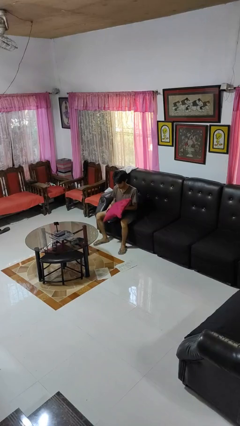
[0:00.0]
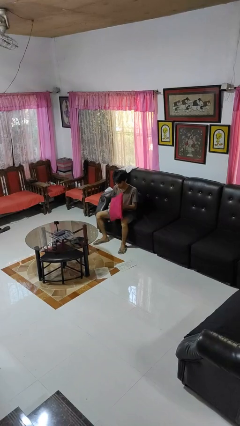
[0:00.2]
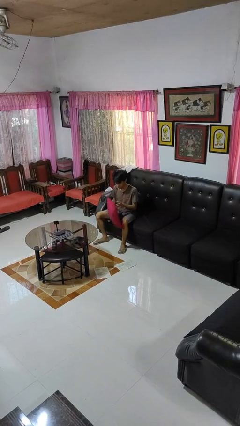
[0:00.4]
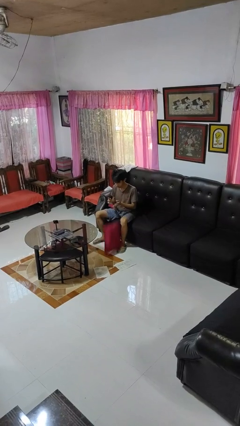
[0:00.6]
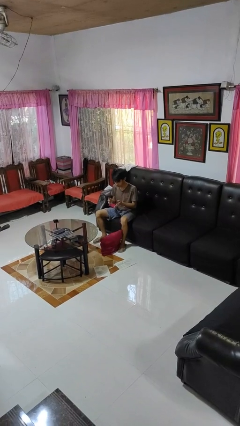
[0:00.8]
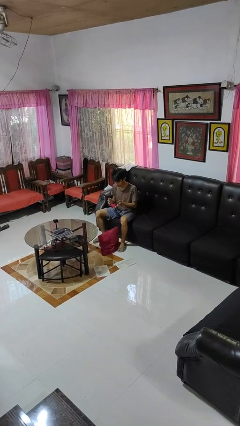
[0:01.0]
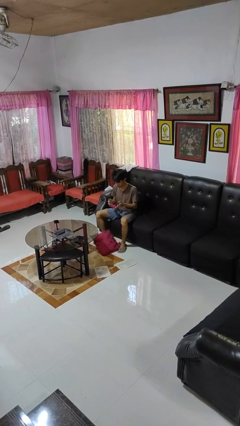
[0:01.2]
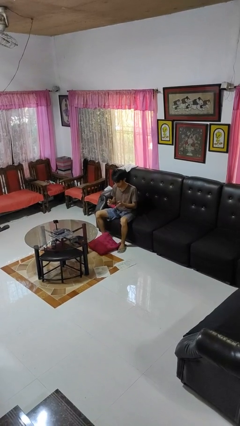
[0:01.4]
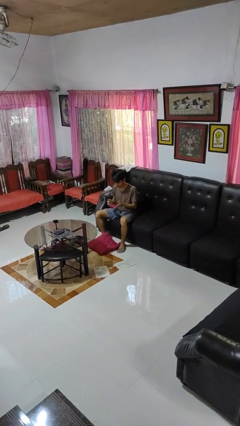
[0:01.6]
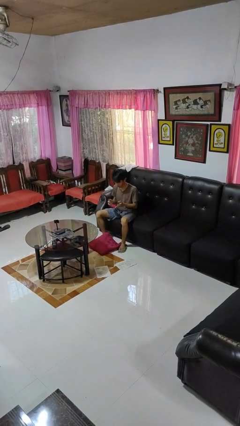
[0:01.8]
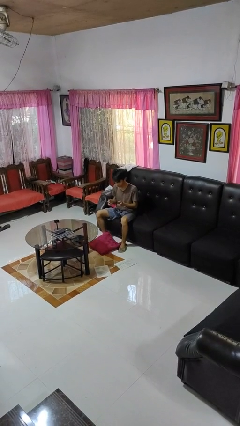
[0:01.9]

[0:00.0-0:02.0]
person drops object

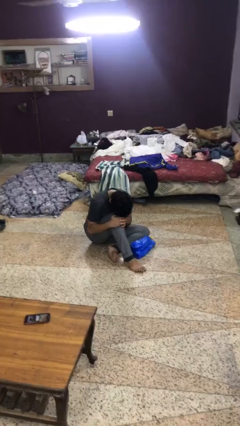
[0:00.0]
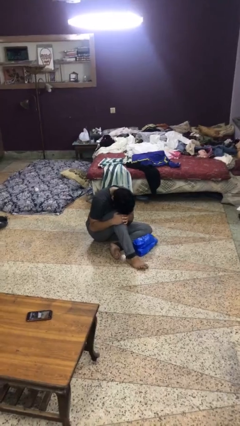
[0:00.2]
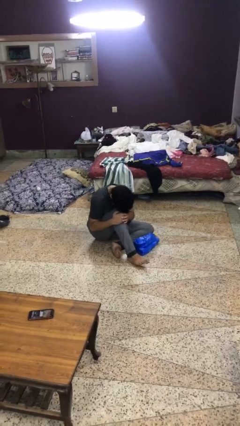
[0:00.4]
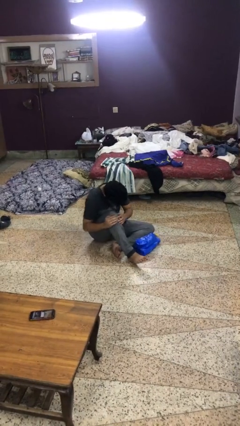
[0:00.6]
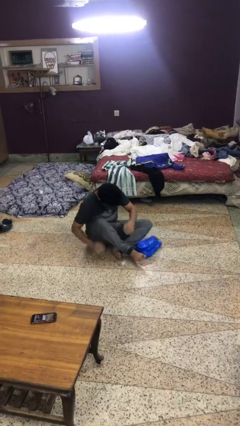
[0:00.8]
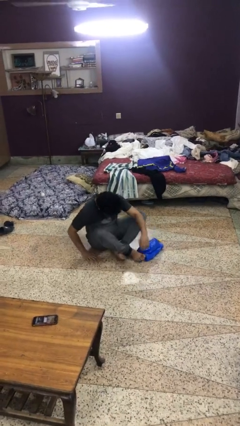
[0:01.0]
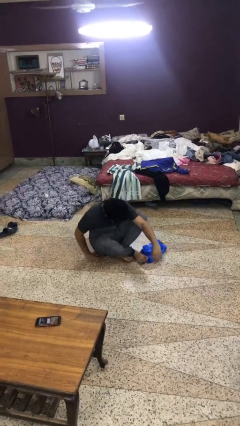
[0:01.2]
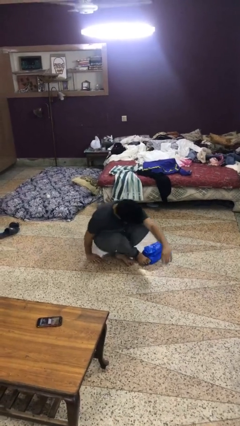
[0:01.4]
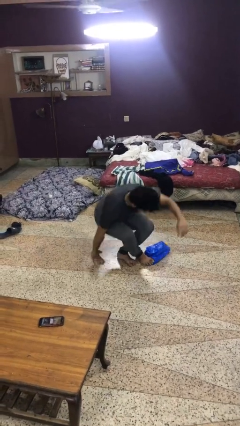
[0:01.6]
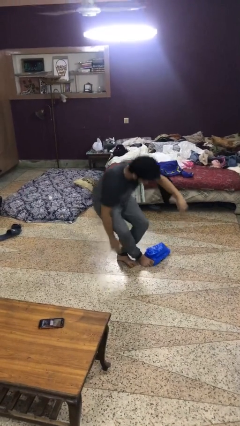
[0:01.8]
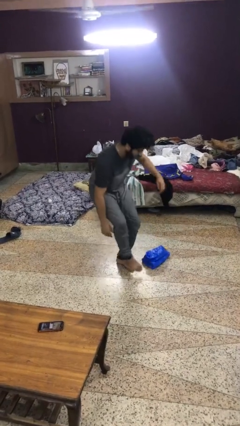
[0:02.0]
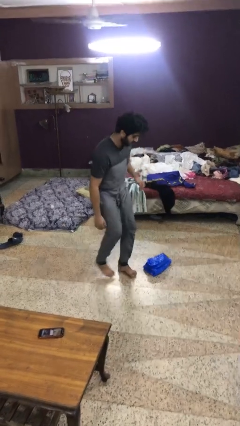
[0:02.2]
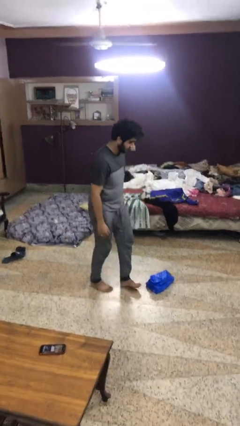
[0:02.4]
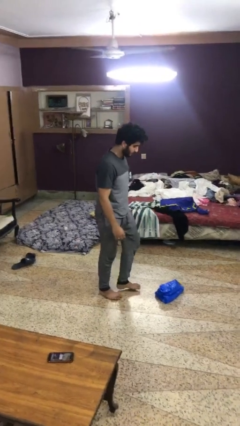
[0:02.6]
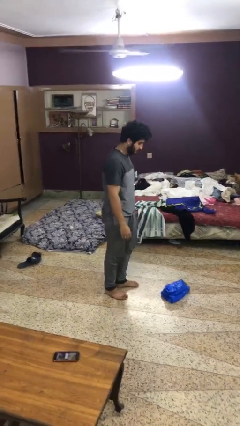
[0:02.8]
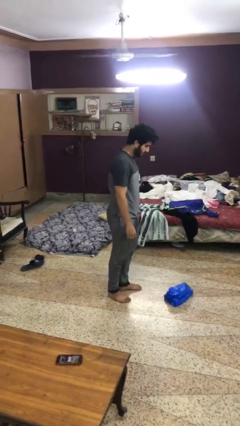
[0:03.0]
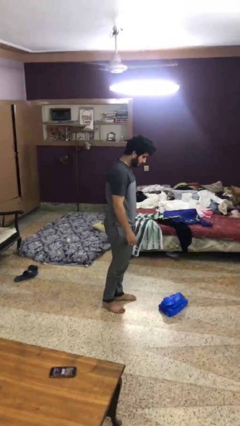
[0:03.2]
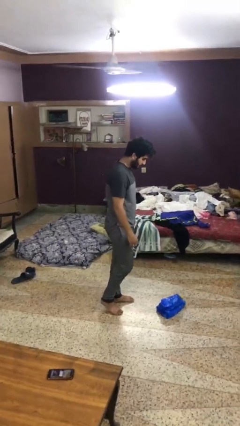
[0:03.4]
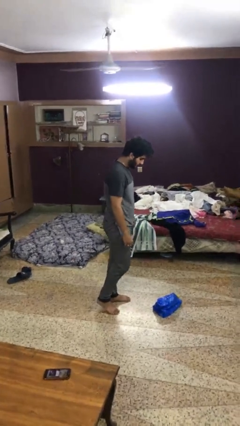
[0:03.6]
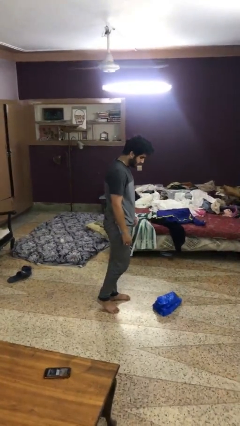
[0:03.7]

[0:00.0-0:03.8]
person stands up from floor

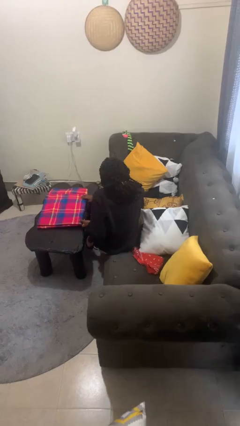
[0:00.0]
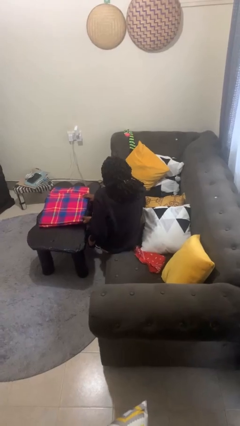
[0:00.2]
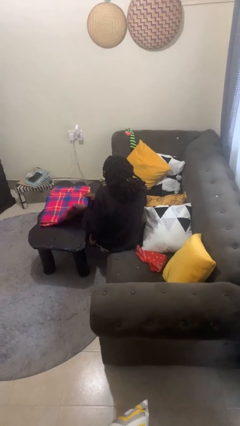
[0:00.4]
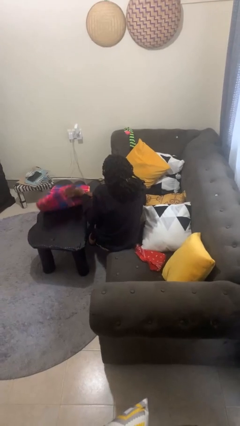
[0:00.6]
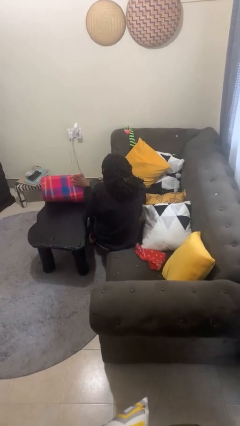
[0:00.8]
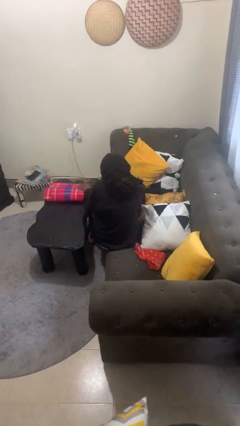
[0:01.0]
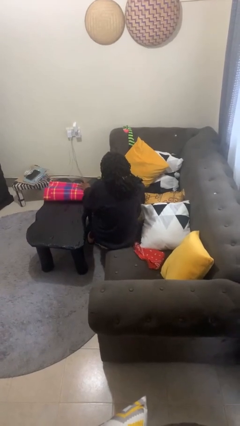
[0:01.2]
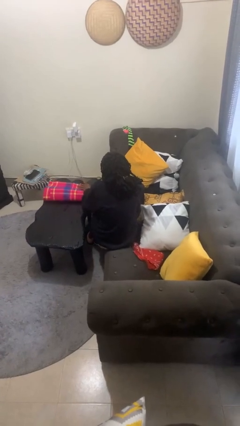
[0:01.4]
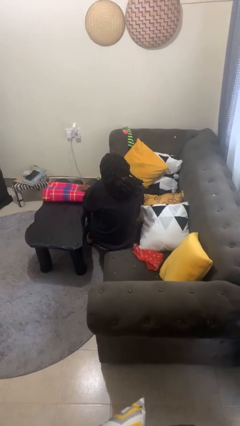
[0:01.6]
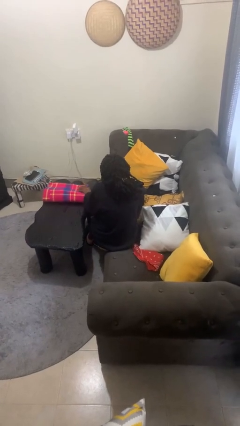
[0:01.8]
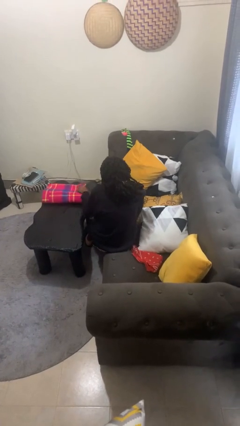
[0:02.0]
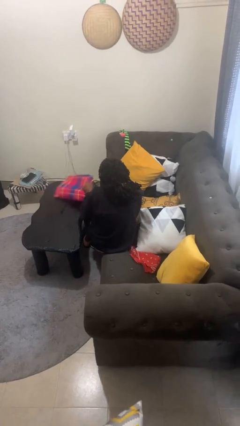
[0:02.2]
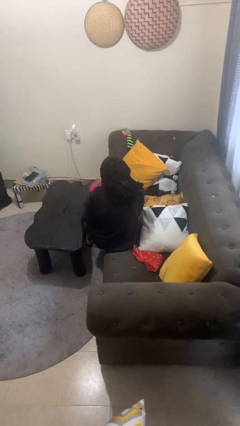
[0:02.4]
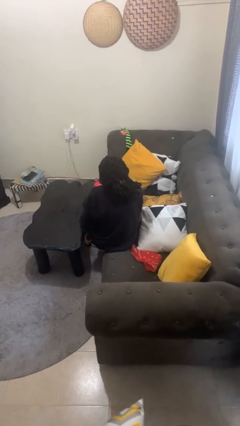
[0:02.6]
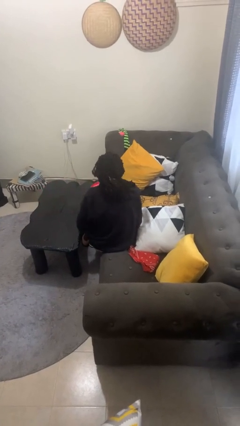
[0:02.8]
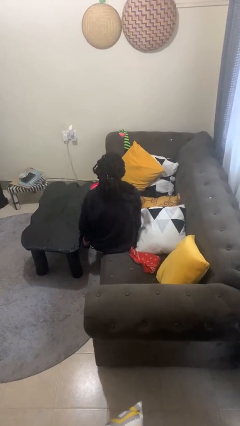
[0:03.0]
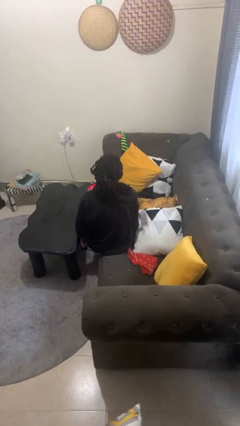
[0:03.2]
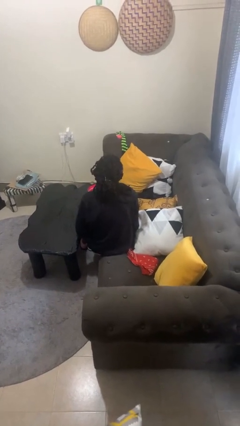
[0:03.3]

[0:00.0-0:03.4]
person folds tablecloth

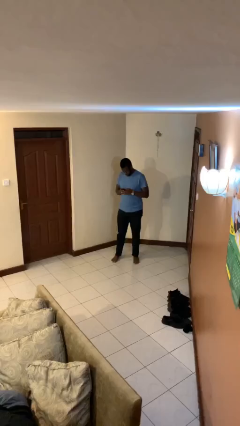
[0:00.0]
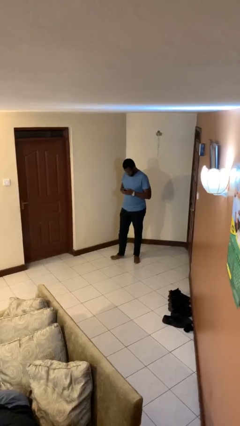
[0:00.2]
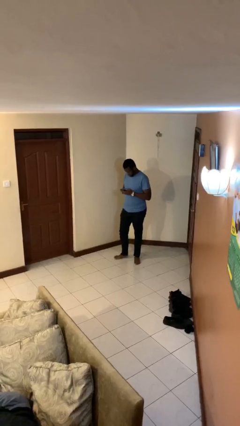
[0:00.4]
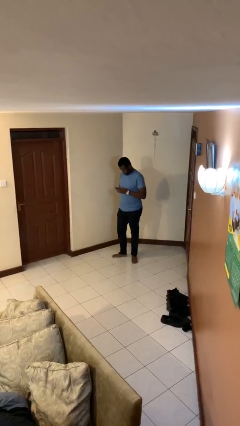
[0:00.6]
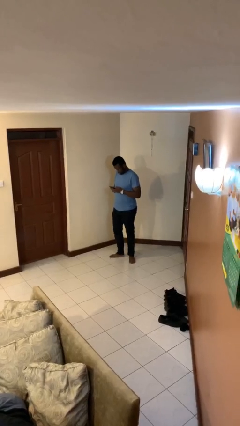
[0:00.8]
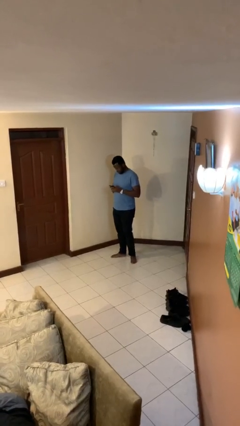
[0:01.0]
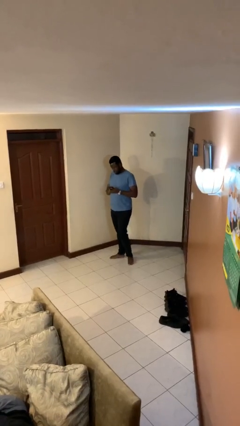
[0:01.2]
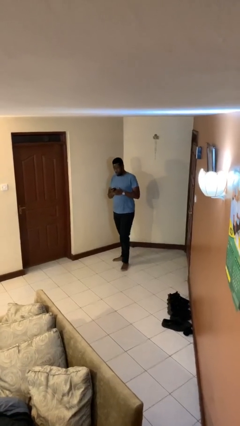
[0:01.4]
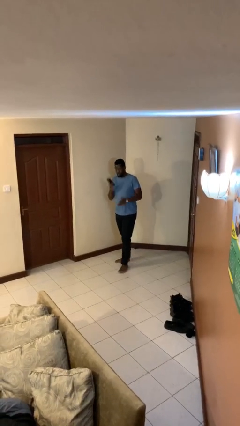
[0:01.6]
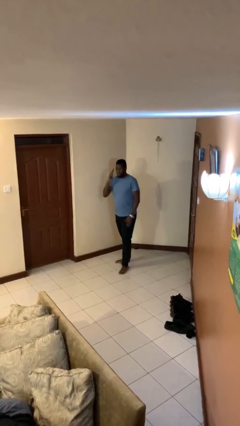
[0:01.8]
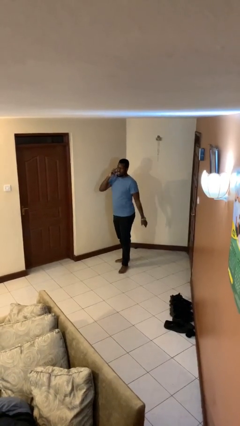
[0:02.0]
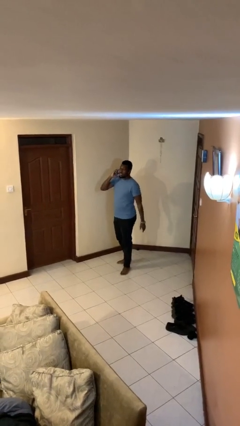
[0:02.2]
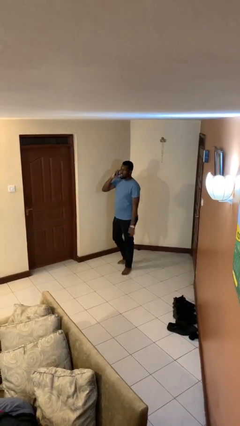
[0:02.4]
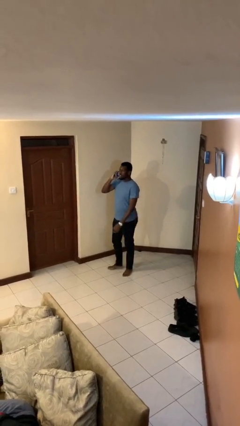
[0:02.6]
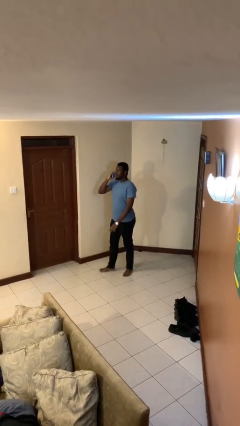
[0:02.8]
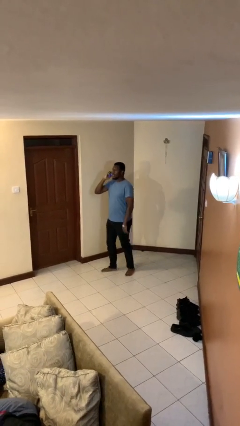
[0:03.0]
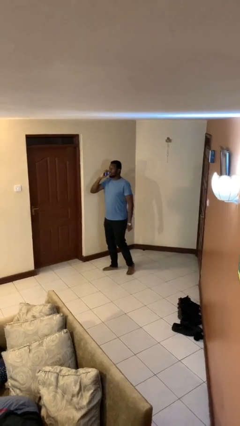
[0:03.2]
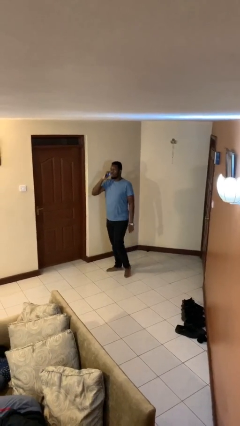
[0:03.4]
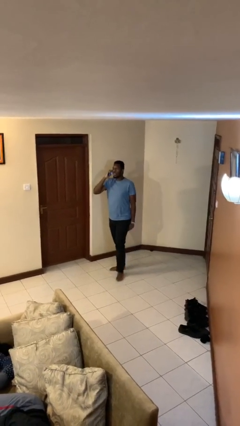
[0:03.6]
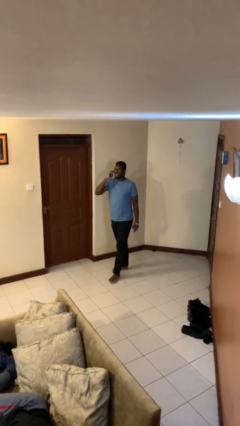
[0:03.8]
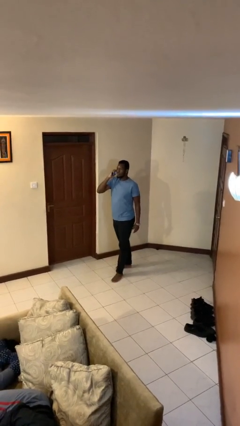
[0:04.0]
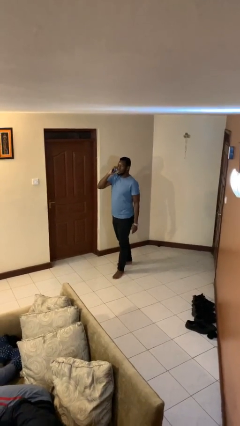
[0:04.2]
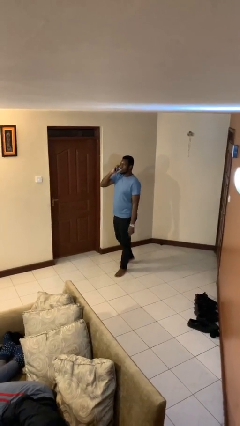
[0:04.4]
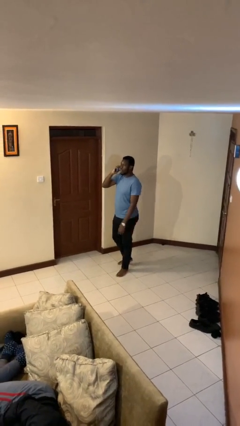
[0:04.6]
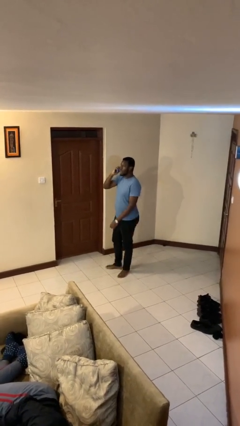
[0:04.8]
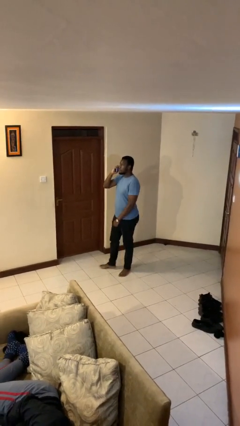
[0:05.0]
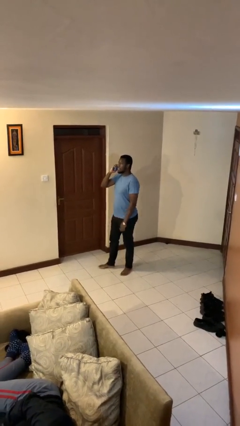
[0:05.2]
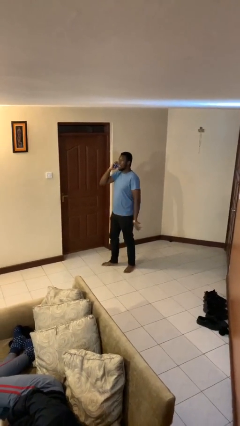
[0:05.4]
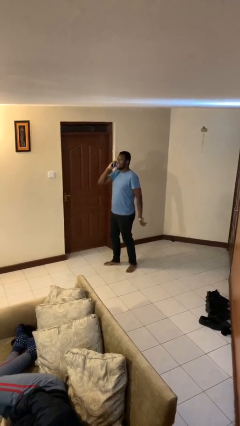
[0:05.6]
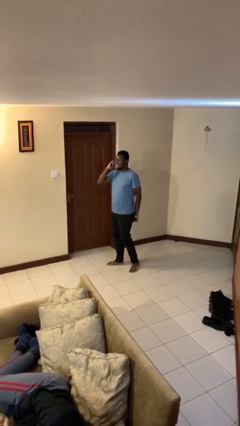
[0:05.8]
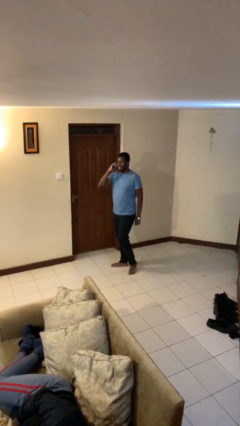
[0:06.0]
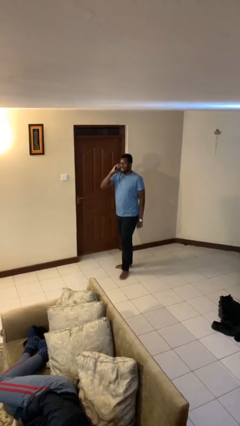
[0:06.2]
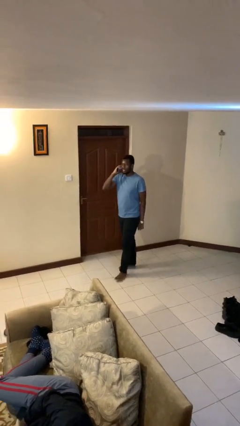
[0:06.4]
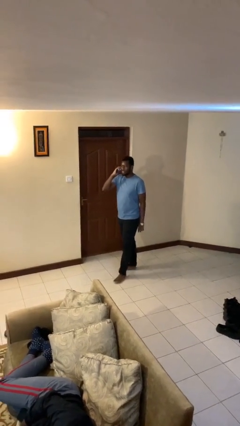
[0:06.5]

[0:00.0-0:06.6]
person talks on phone

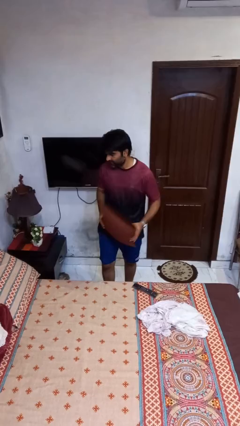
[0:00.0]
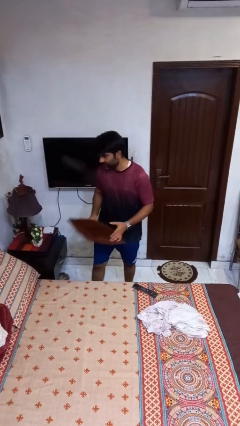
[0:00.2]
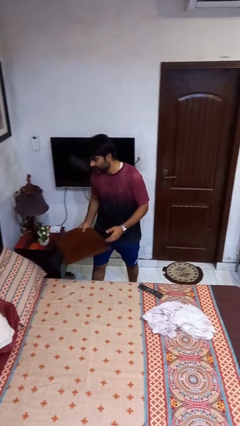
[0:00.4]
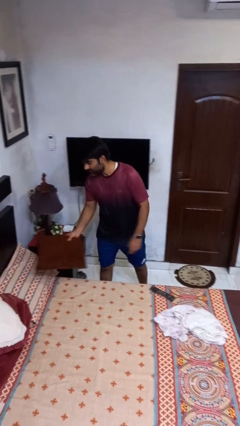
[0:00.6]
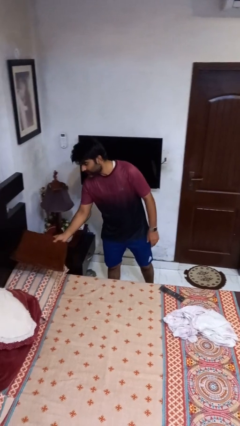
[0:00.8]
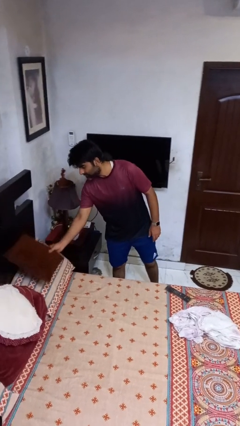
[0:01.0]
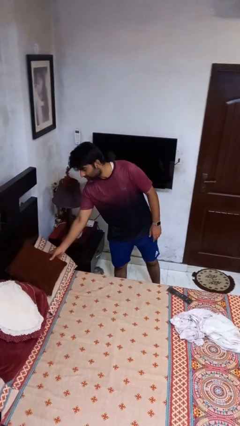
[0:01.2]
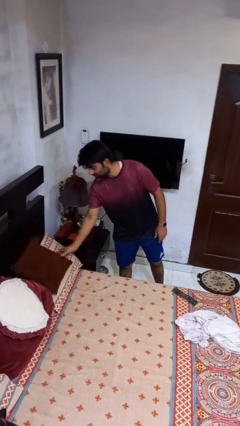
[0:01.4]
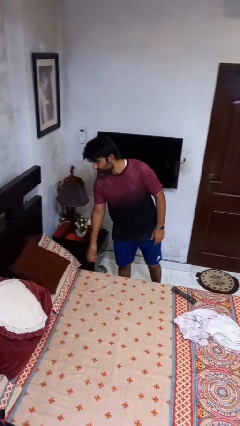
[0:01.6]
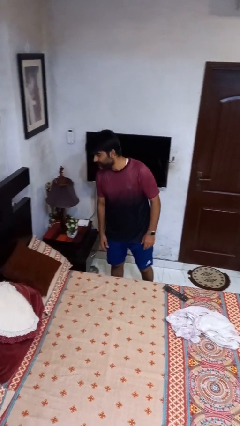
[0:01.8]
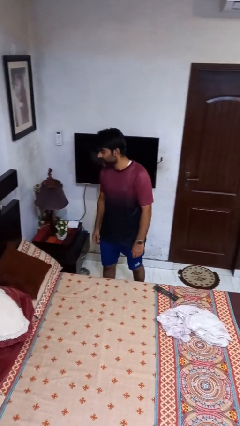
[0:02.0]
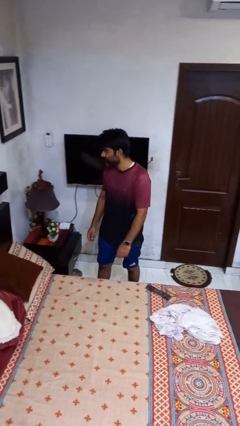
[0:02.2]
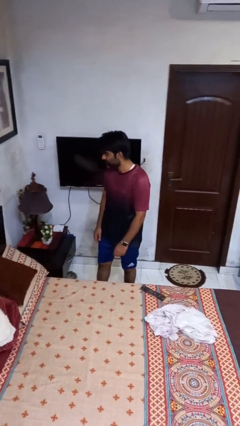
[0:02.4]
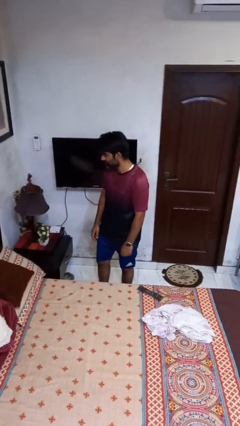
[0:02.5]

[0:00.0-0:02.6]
person puts down object on bed
